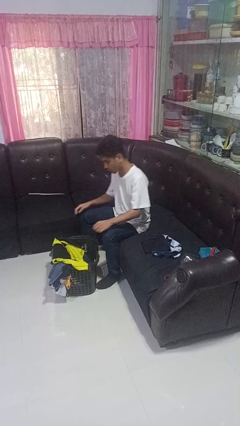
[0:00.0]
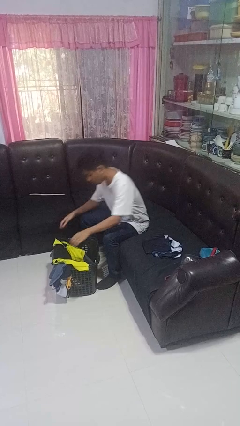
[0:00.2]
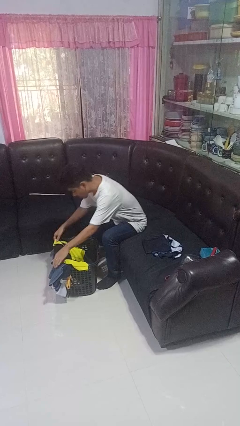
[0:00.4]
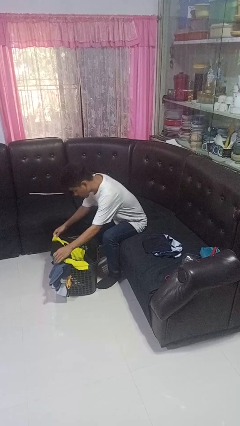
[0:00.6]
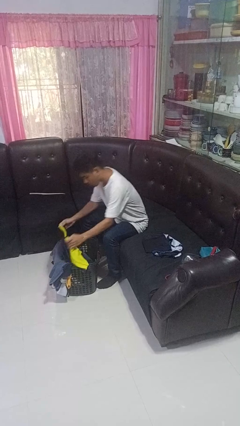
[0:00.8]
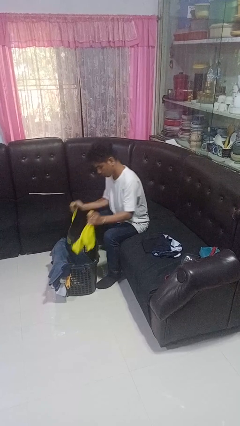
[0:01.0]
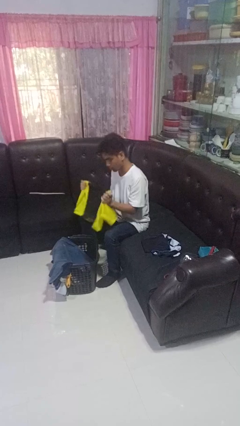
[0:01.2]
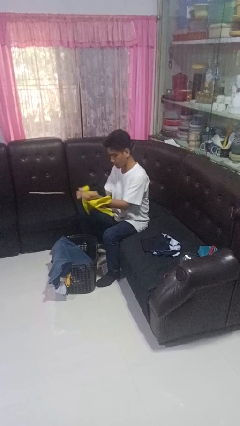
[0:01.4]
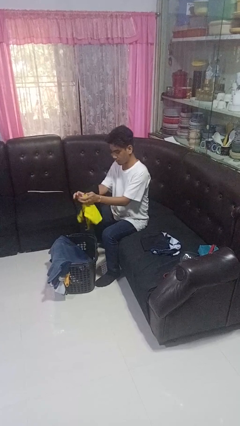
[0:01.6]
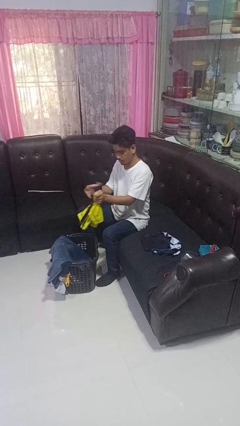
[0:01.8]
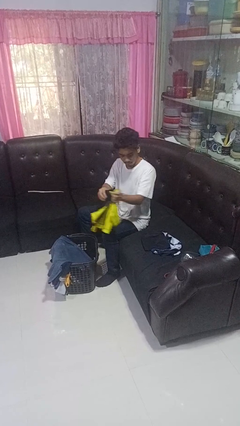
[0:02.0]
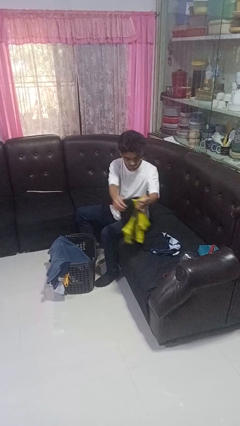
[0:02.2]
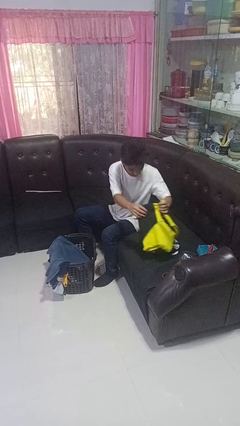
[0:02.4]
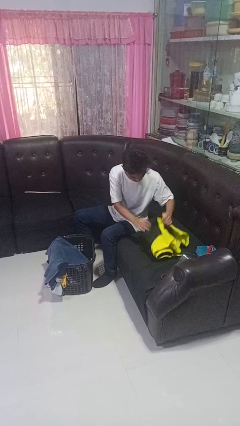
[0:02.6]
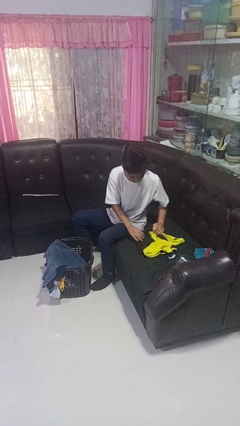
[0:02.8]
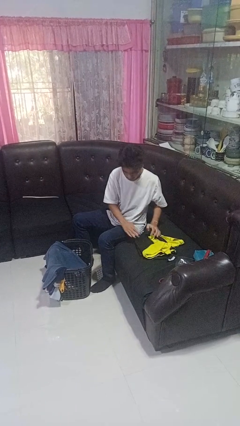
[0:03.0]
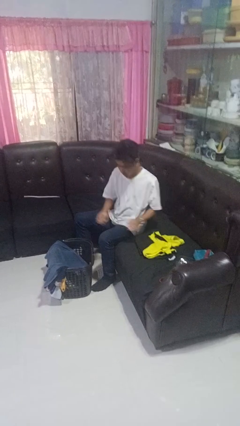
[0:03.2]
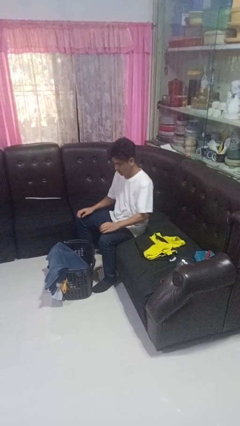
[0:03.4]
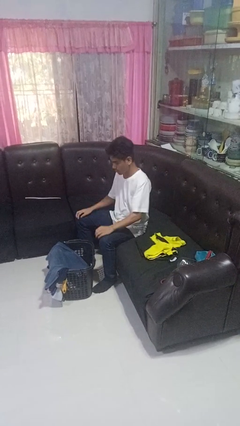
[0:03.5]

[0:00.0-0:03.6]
person folds shirt

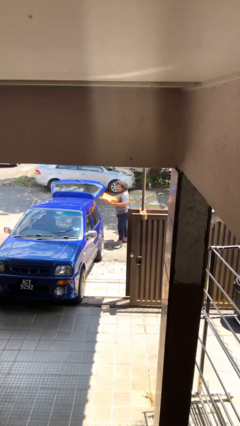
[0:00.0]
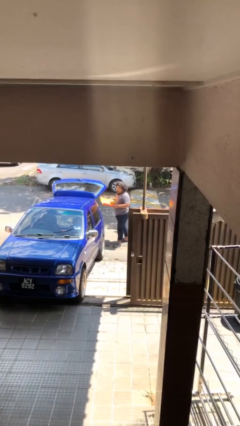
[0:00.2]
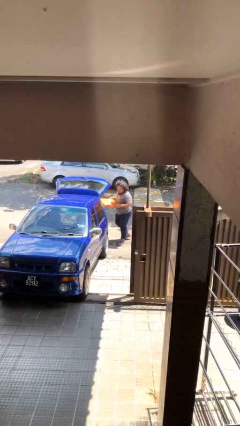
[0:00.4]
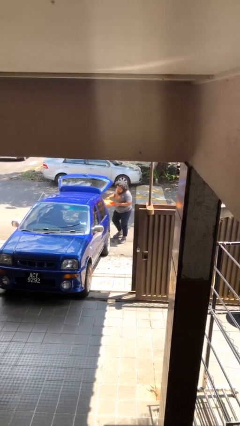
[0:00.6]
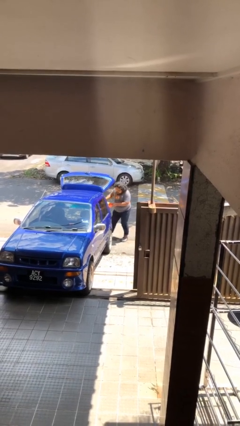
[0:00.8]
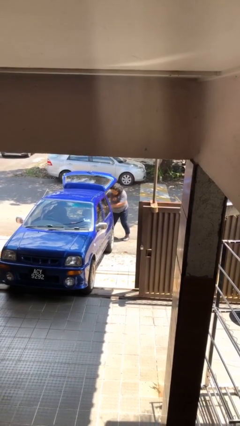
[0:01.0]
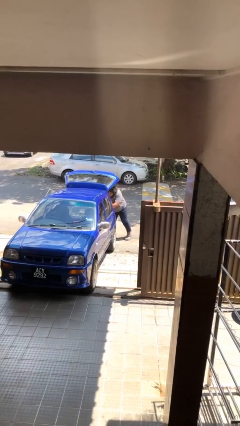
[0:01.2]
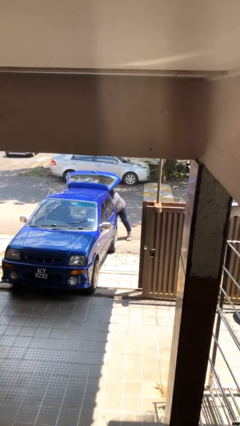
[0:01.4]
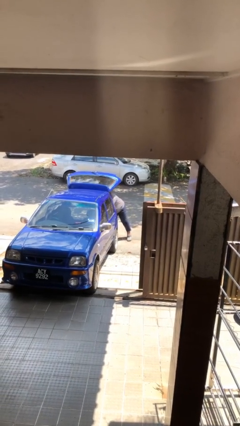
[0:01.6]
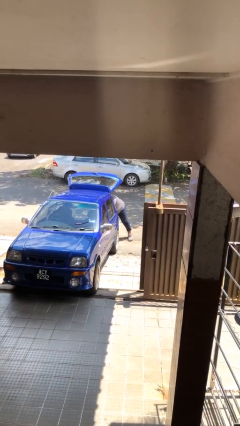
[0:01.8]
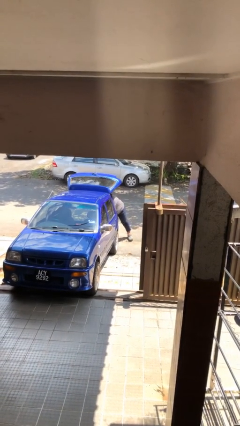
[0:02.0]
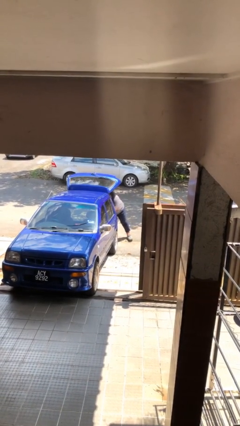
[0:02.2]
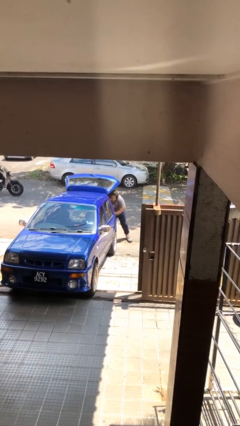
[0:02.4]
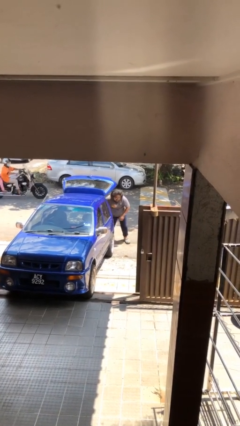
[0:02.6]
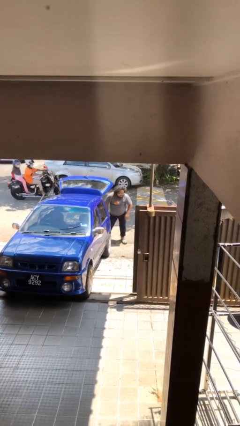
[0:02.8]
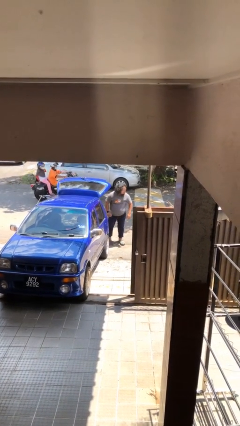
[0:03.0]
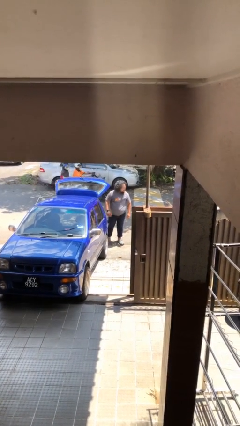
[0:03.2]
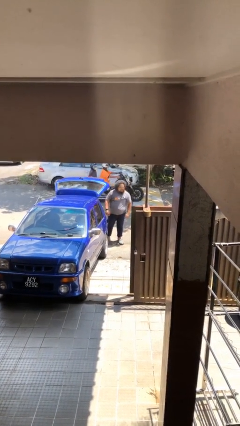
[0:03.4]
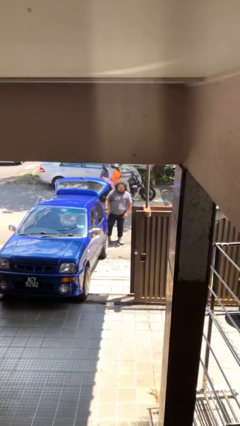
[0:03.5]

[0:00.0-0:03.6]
person loads car

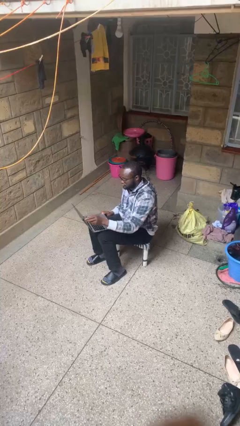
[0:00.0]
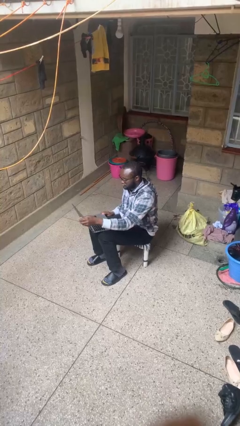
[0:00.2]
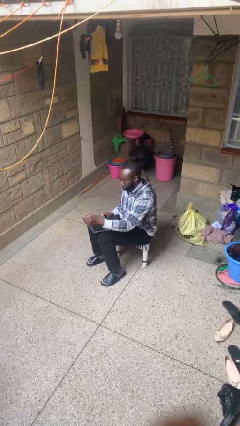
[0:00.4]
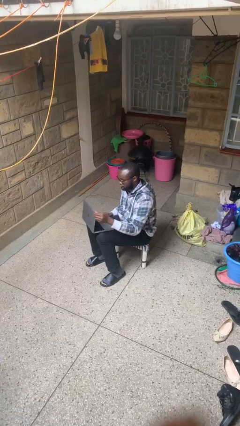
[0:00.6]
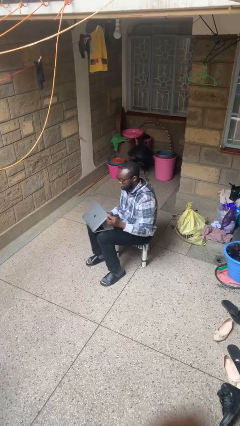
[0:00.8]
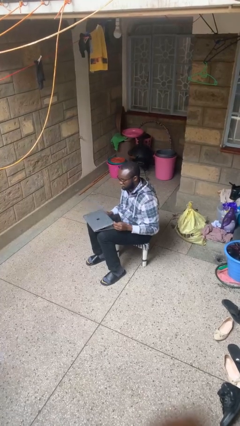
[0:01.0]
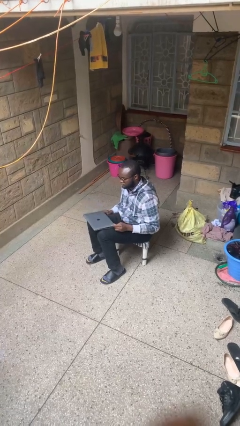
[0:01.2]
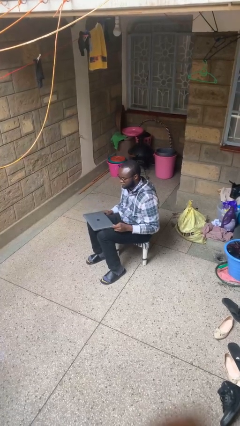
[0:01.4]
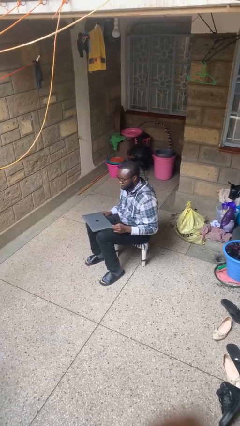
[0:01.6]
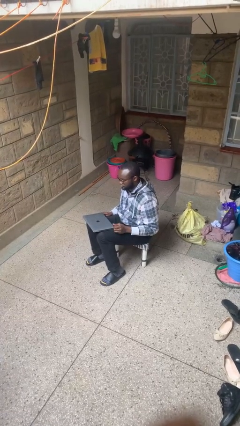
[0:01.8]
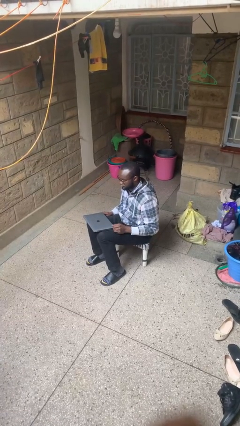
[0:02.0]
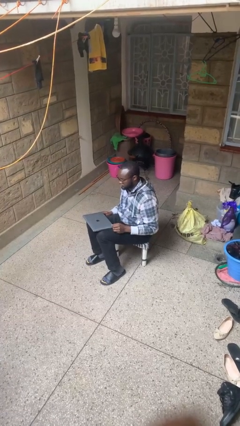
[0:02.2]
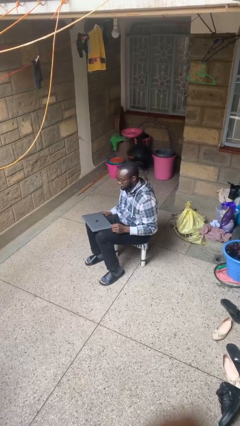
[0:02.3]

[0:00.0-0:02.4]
person closes laptop

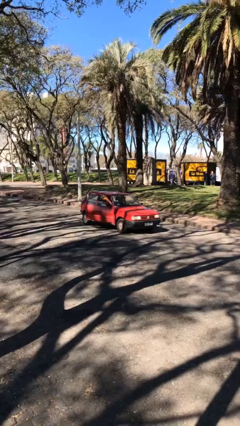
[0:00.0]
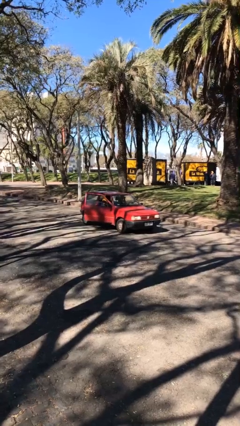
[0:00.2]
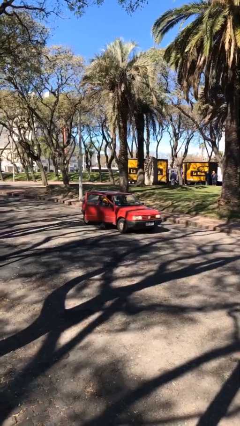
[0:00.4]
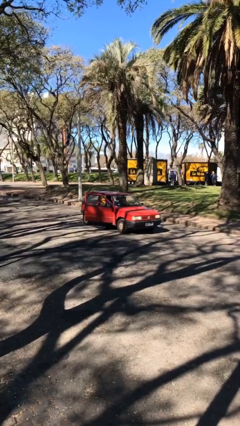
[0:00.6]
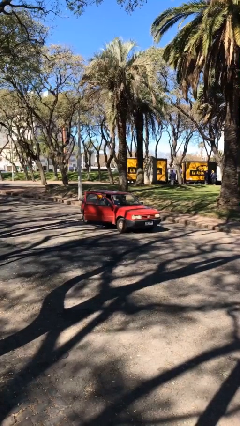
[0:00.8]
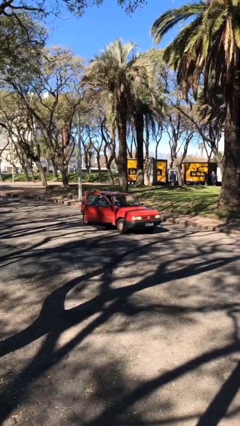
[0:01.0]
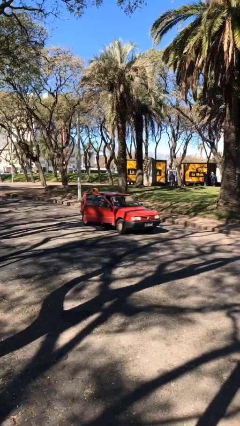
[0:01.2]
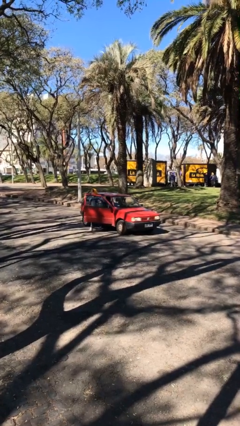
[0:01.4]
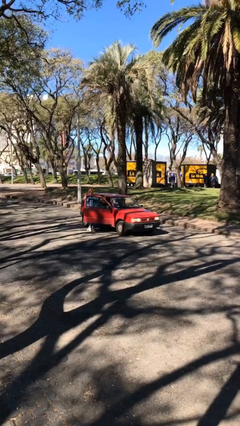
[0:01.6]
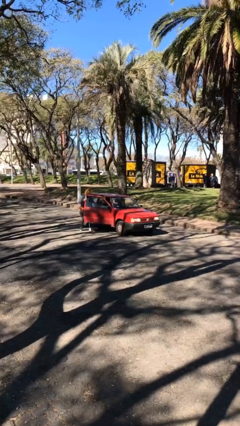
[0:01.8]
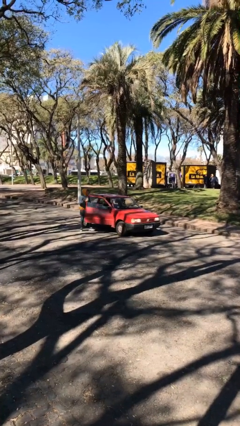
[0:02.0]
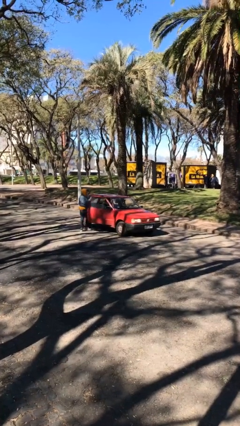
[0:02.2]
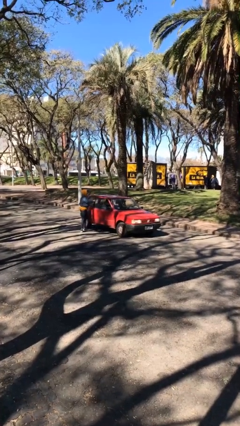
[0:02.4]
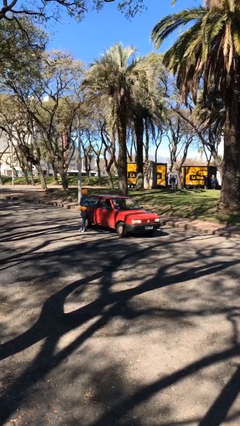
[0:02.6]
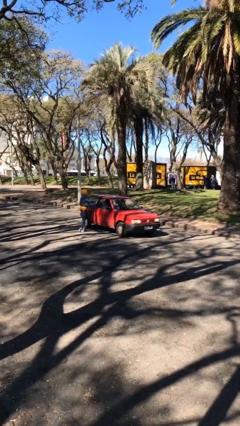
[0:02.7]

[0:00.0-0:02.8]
car drops off person

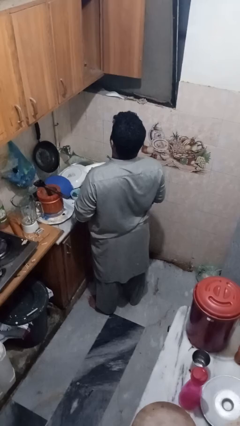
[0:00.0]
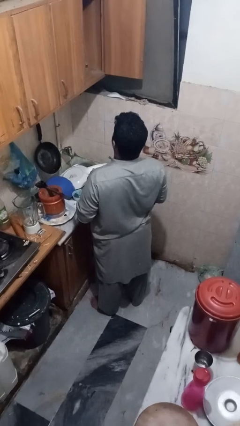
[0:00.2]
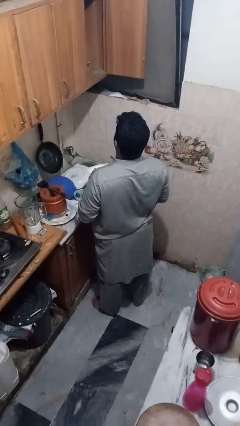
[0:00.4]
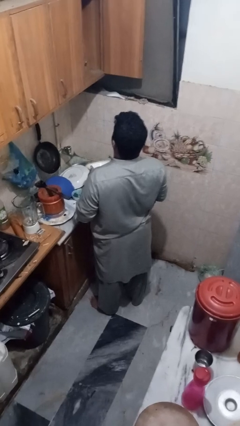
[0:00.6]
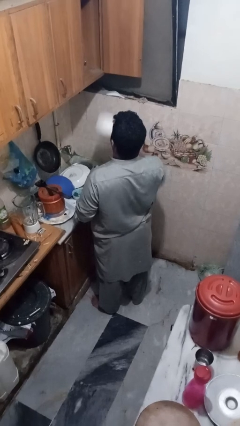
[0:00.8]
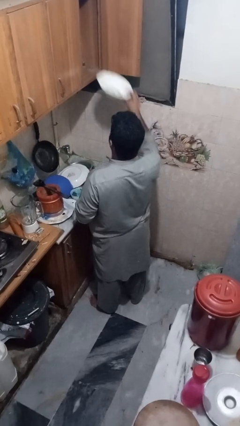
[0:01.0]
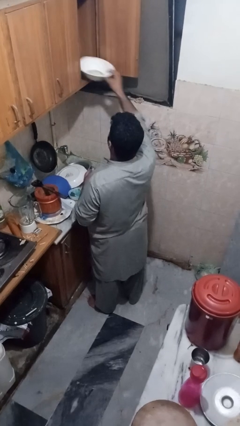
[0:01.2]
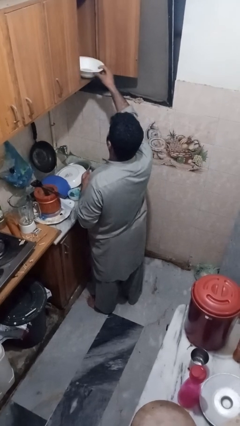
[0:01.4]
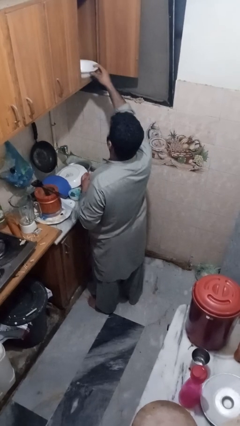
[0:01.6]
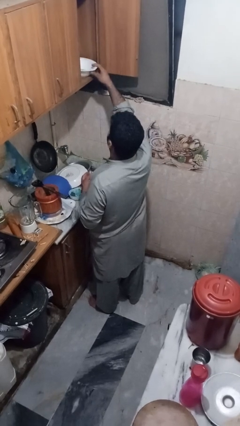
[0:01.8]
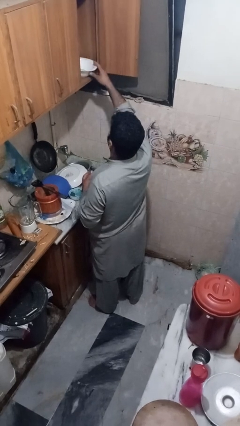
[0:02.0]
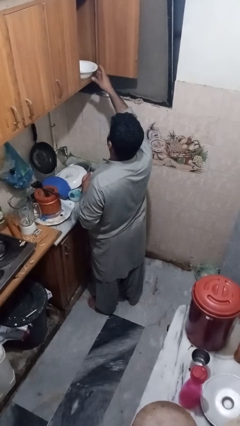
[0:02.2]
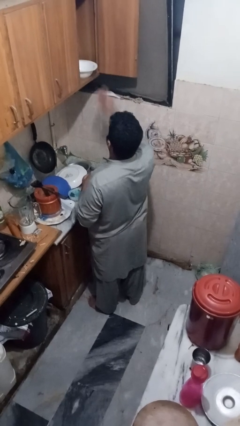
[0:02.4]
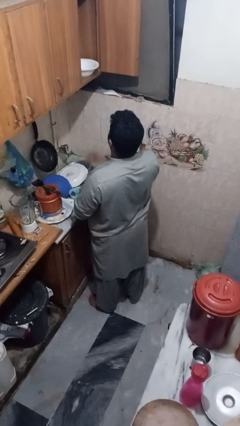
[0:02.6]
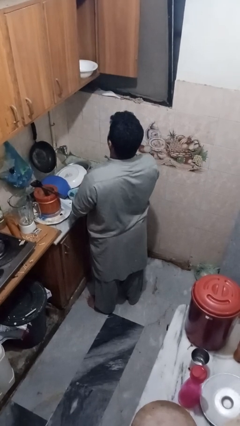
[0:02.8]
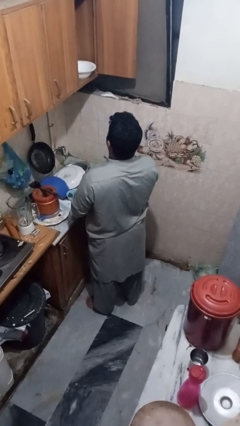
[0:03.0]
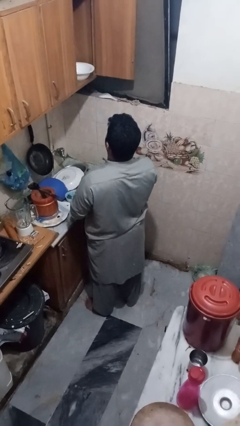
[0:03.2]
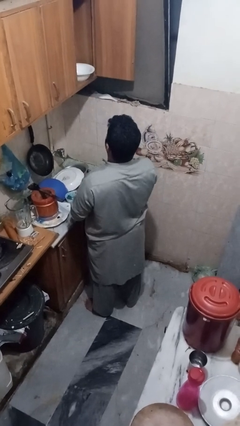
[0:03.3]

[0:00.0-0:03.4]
person puts object in cabinet

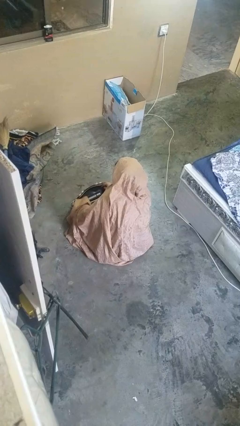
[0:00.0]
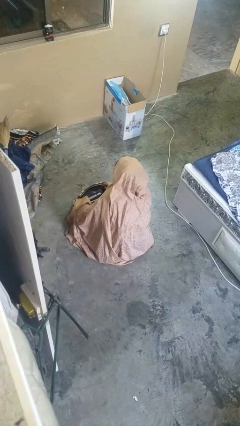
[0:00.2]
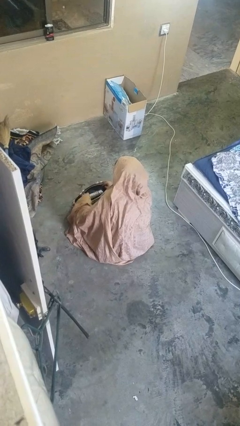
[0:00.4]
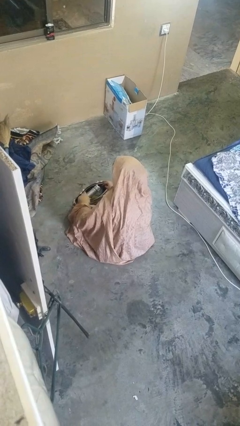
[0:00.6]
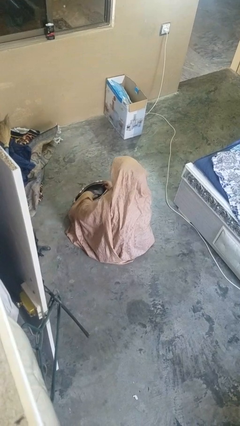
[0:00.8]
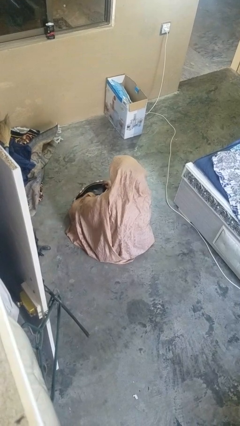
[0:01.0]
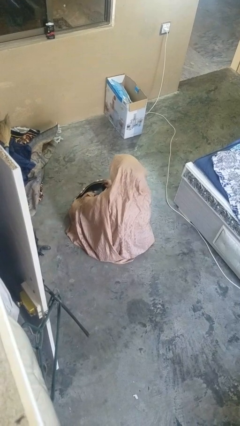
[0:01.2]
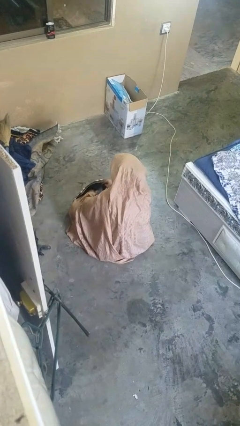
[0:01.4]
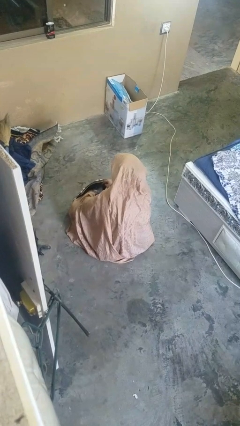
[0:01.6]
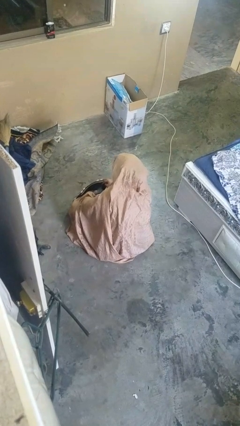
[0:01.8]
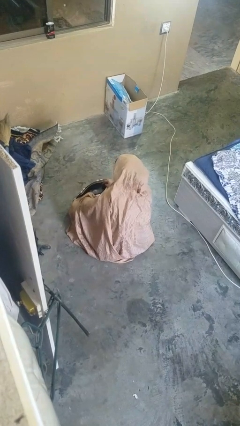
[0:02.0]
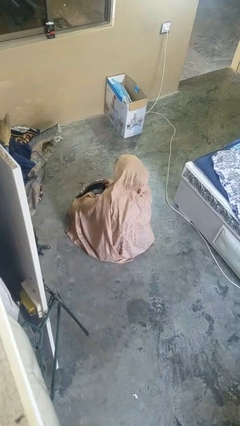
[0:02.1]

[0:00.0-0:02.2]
person searches in purse
